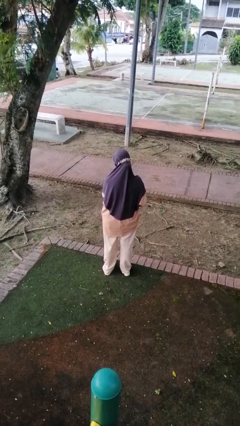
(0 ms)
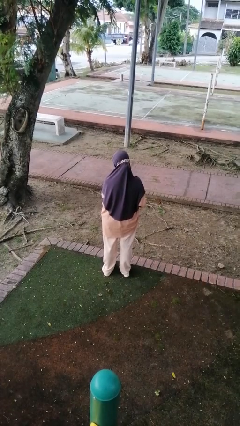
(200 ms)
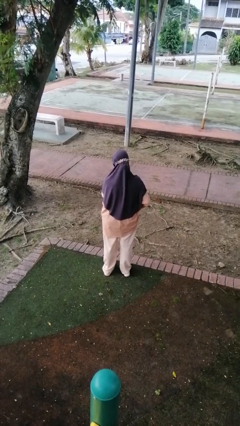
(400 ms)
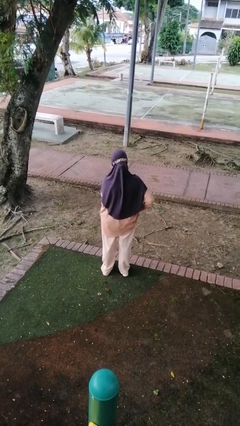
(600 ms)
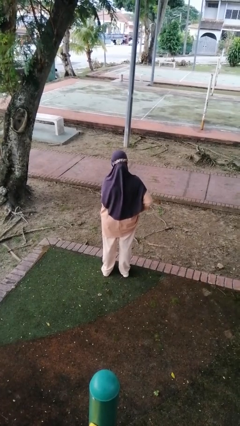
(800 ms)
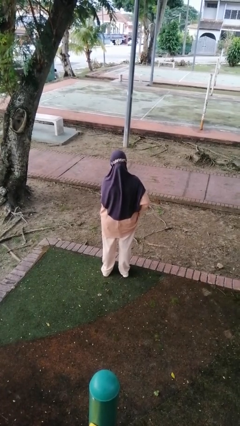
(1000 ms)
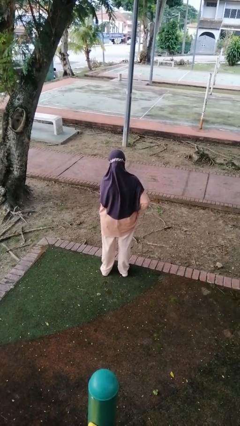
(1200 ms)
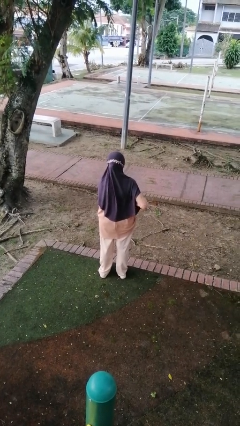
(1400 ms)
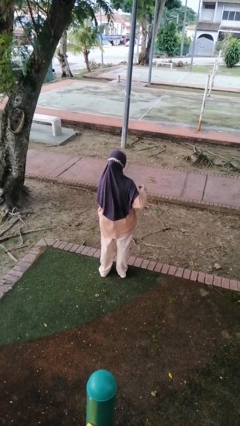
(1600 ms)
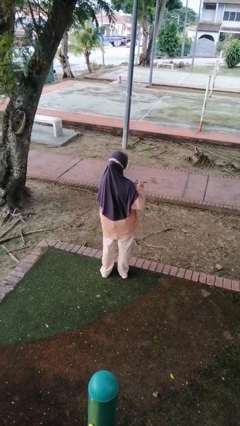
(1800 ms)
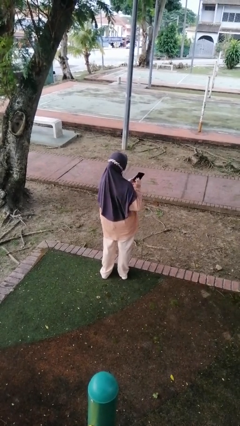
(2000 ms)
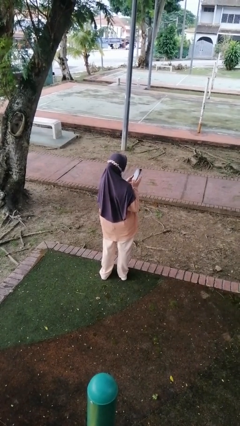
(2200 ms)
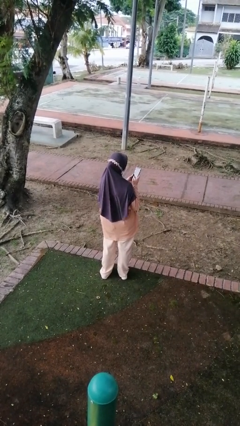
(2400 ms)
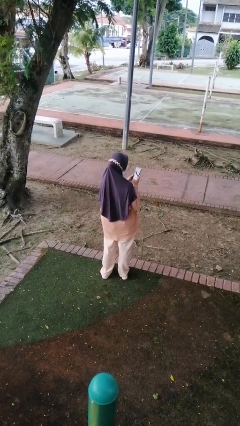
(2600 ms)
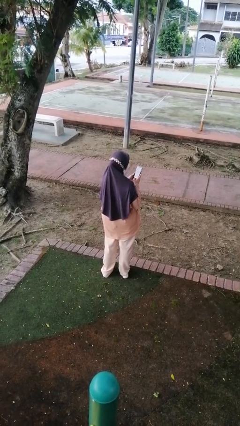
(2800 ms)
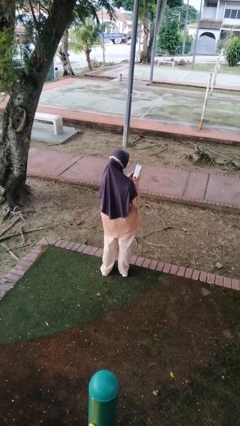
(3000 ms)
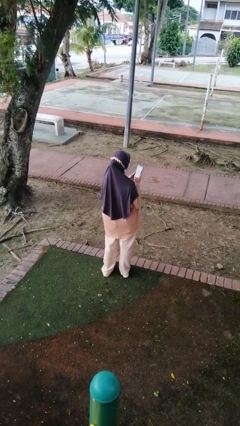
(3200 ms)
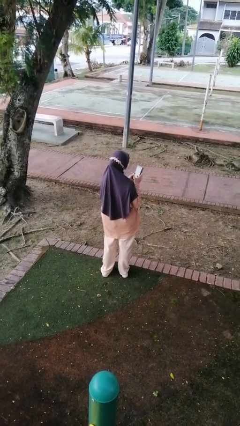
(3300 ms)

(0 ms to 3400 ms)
person takes phone from pocket

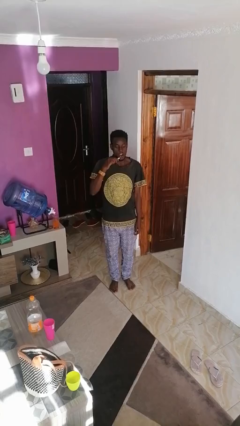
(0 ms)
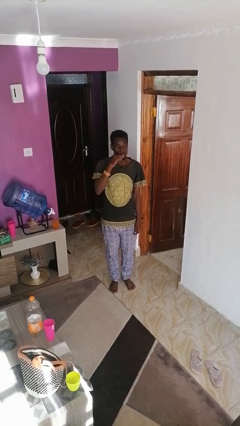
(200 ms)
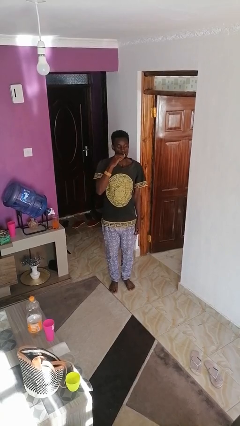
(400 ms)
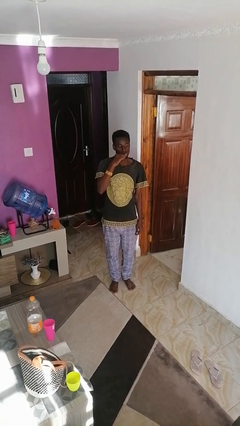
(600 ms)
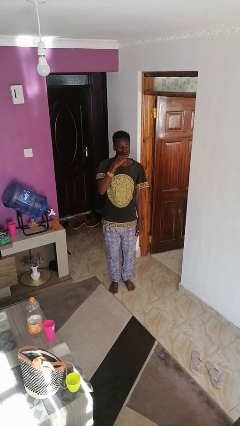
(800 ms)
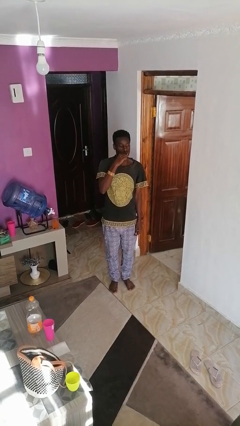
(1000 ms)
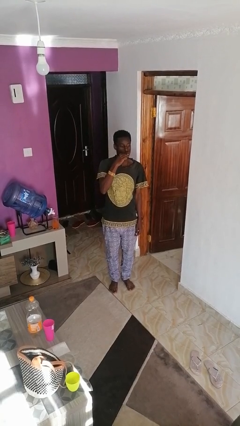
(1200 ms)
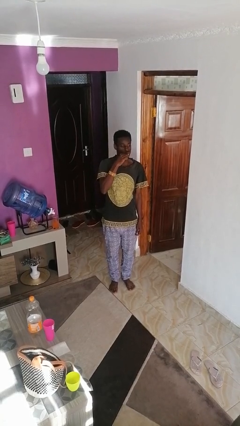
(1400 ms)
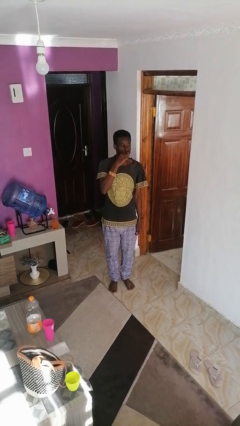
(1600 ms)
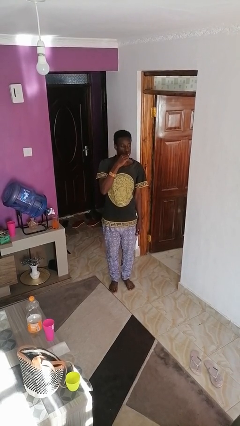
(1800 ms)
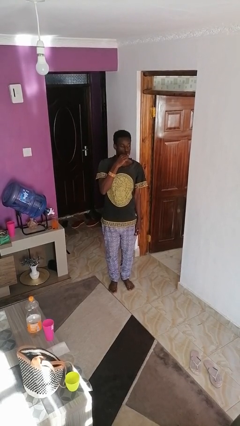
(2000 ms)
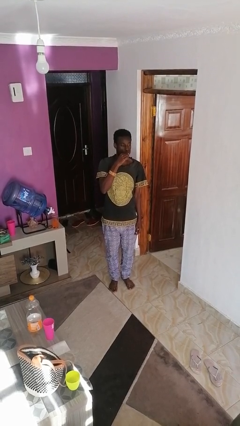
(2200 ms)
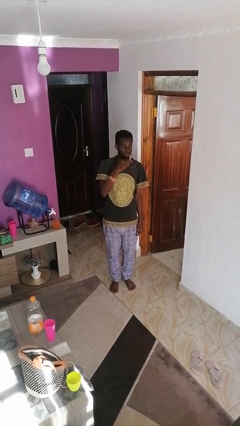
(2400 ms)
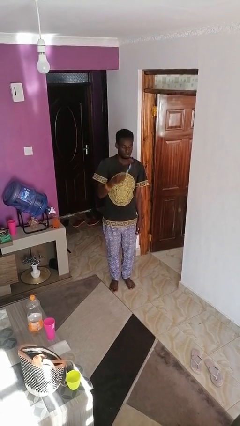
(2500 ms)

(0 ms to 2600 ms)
person brushes teeth

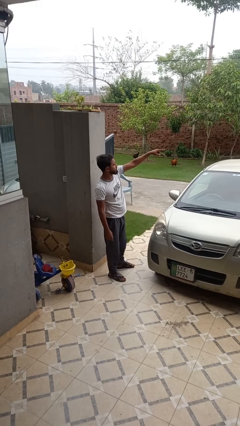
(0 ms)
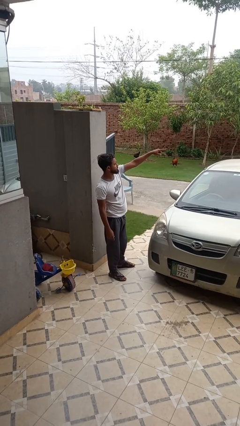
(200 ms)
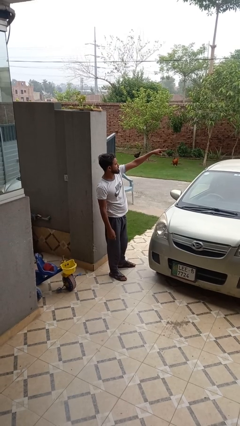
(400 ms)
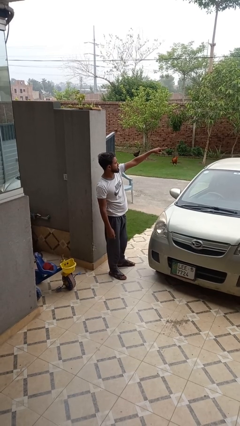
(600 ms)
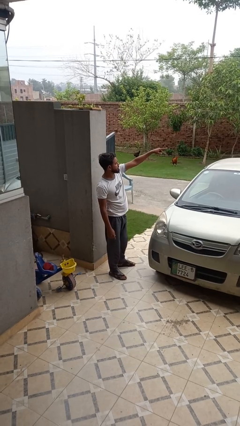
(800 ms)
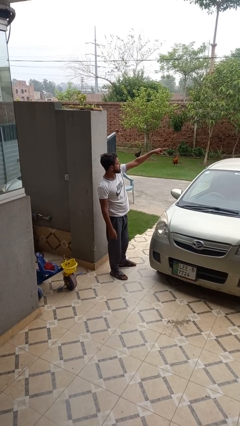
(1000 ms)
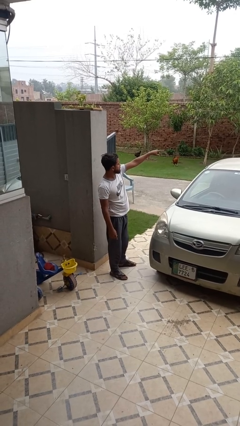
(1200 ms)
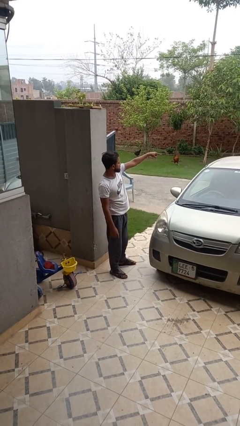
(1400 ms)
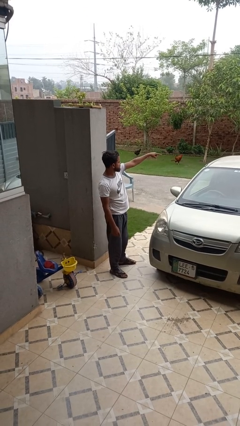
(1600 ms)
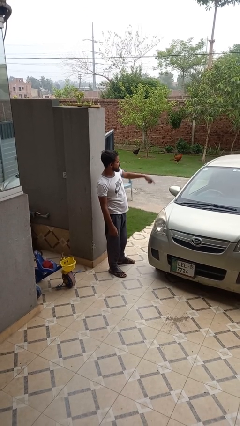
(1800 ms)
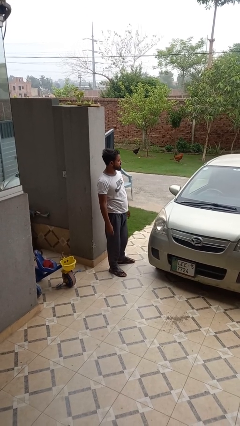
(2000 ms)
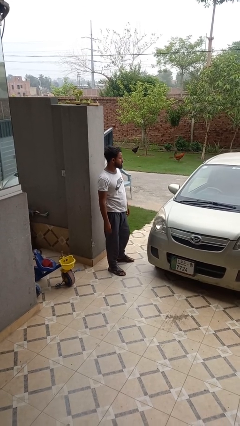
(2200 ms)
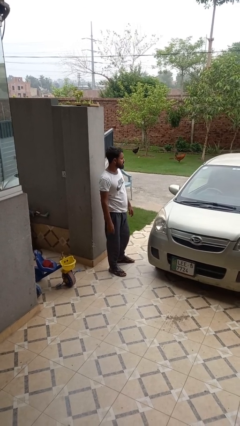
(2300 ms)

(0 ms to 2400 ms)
person points at person

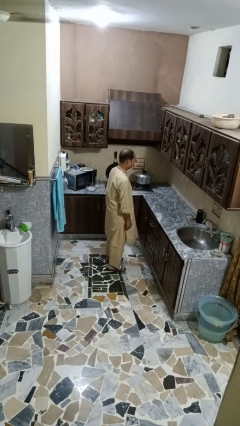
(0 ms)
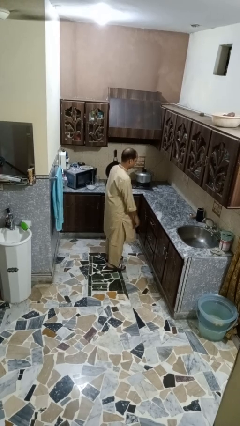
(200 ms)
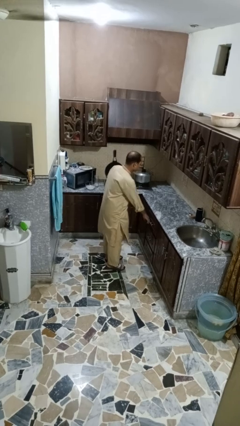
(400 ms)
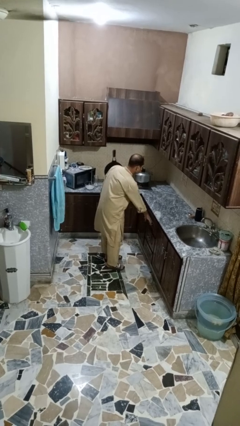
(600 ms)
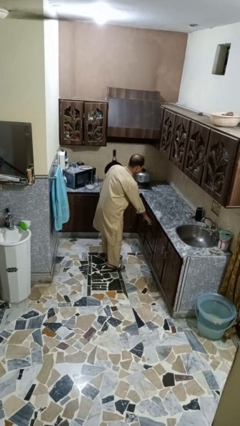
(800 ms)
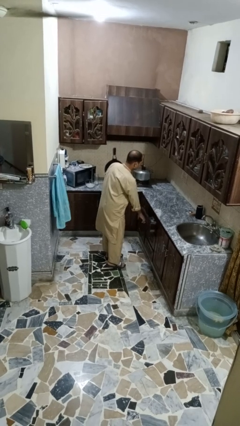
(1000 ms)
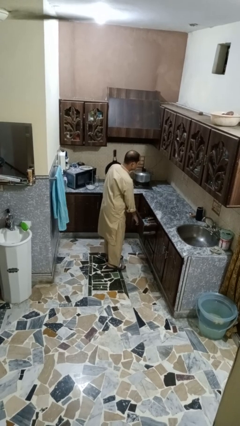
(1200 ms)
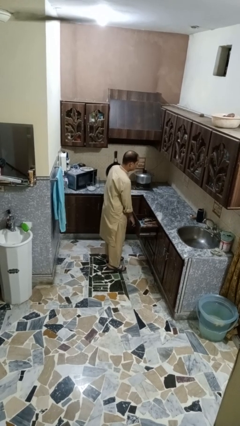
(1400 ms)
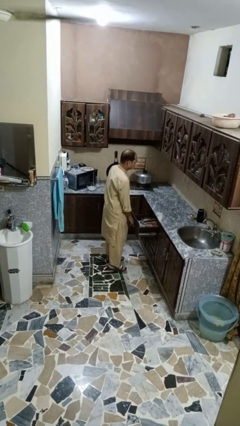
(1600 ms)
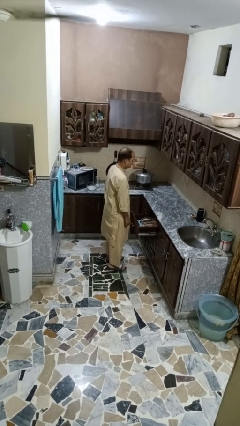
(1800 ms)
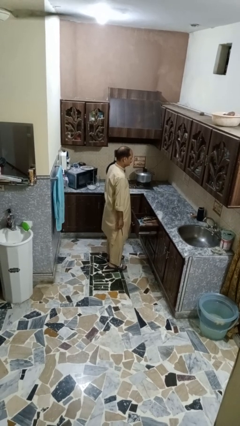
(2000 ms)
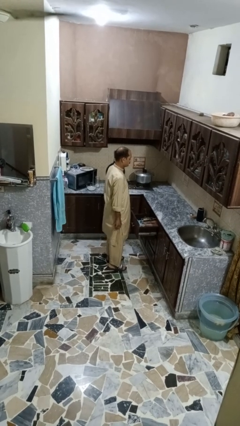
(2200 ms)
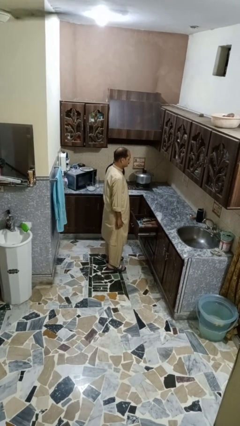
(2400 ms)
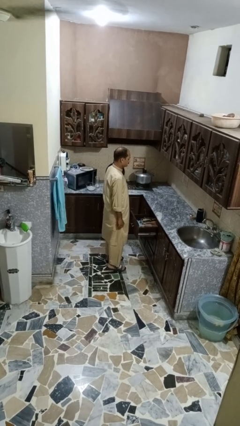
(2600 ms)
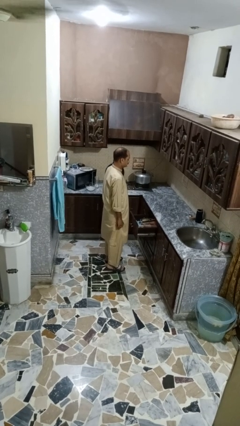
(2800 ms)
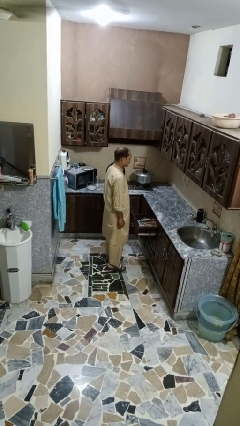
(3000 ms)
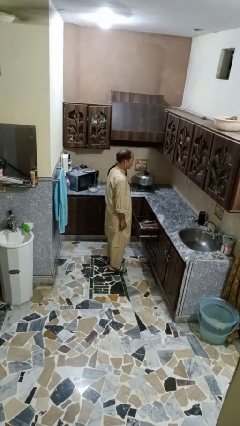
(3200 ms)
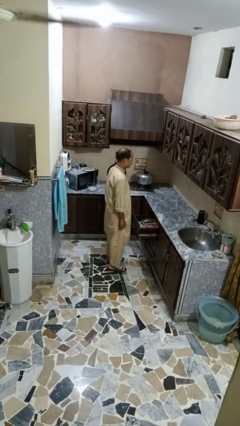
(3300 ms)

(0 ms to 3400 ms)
person opens kitchen drawer

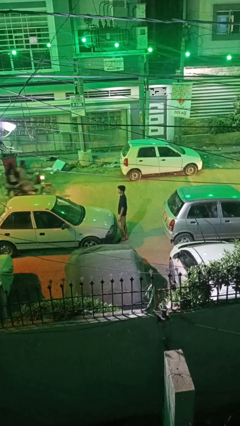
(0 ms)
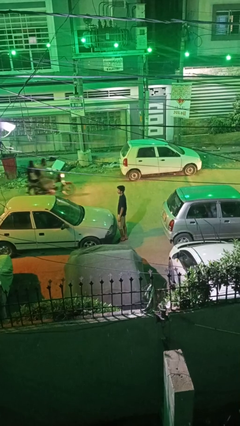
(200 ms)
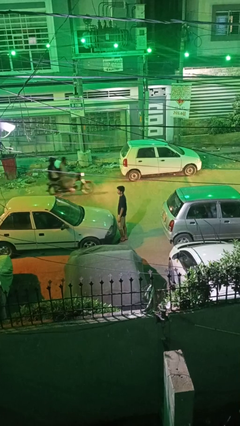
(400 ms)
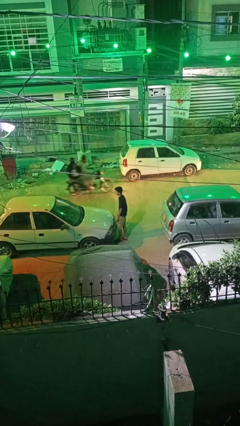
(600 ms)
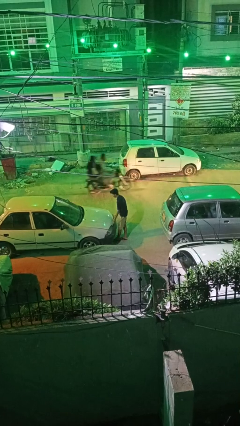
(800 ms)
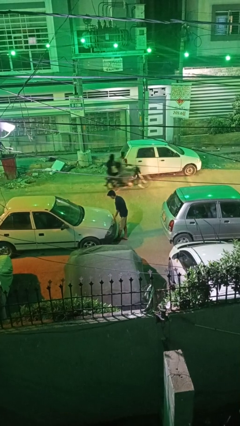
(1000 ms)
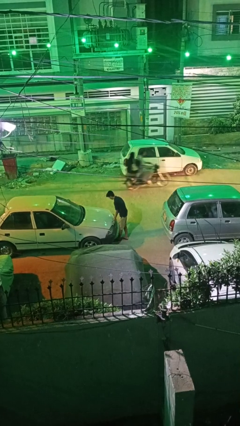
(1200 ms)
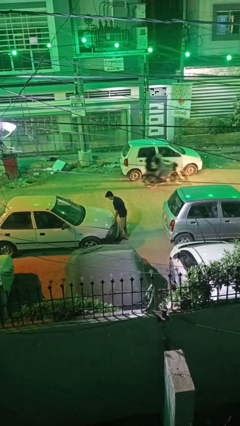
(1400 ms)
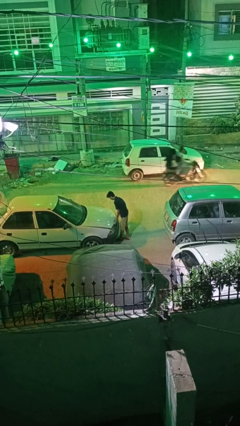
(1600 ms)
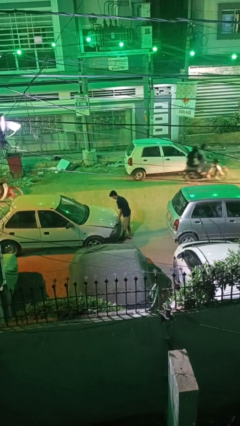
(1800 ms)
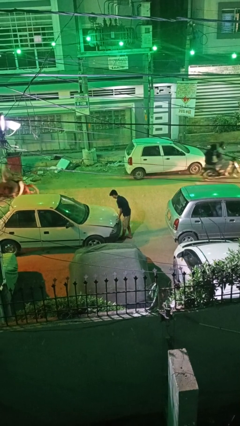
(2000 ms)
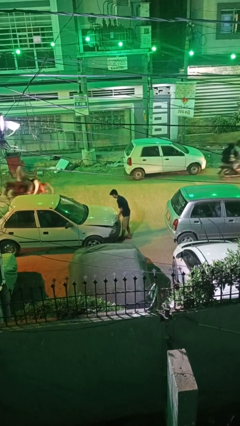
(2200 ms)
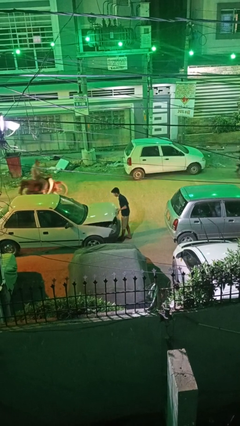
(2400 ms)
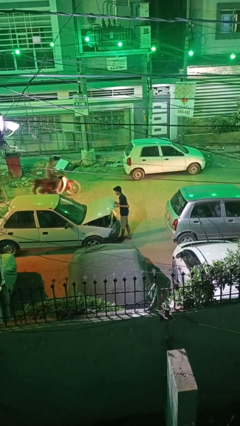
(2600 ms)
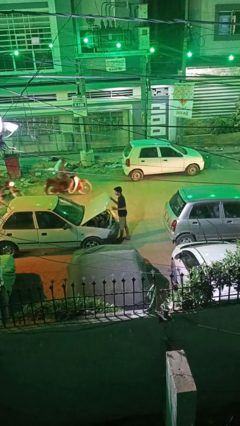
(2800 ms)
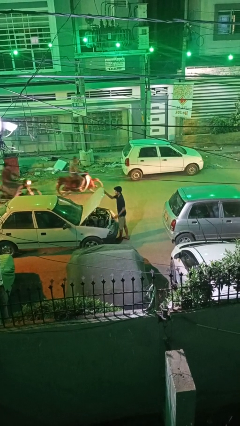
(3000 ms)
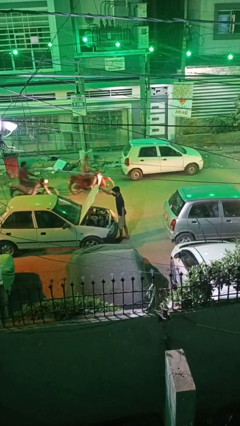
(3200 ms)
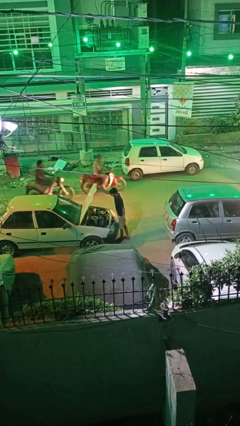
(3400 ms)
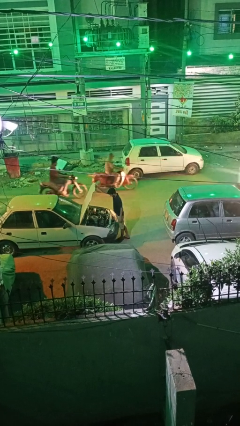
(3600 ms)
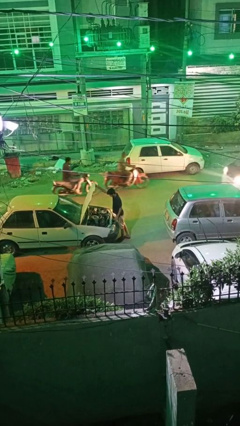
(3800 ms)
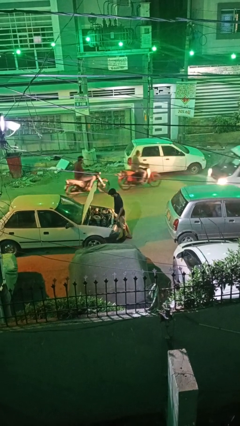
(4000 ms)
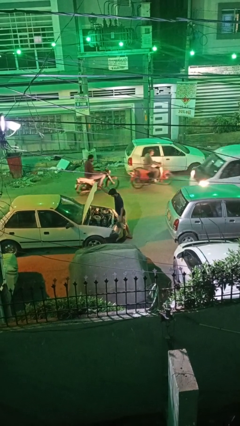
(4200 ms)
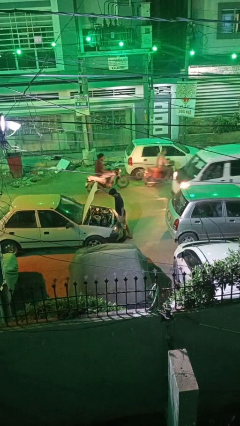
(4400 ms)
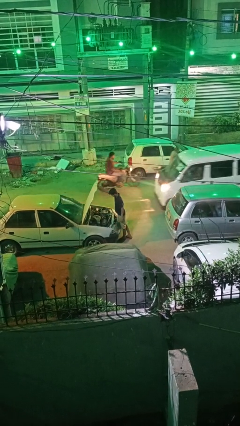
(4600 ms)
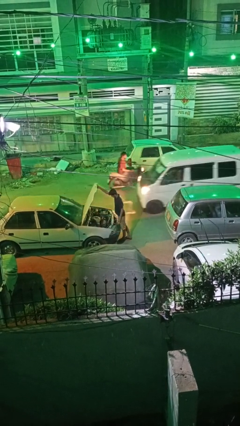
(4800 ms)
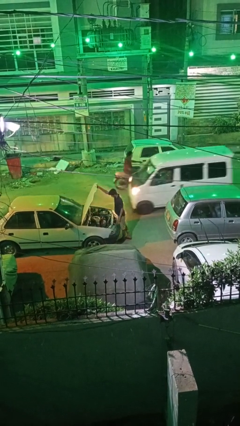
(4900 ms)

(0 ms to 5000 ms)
person opens car hood

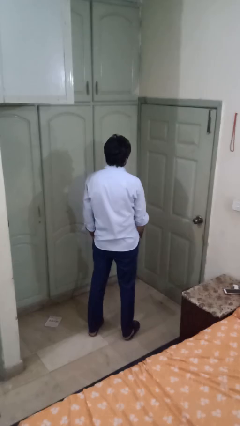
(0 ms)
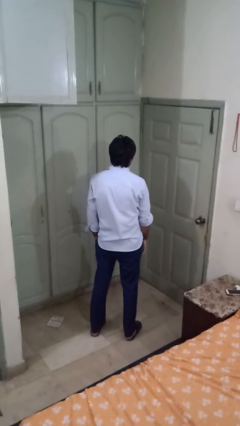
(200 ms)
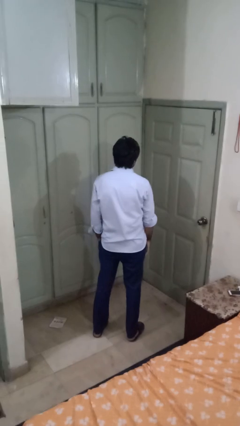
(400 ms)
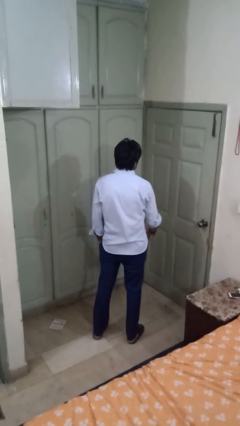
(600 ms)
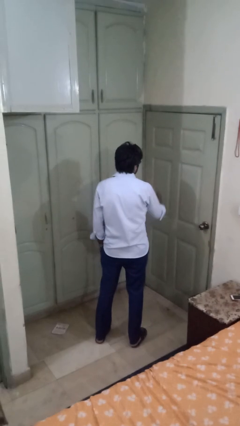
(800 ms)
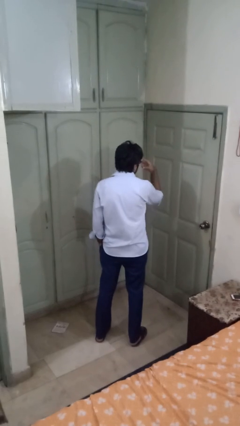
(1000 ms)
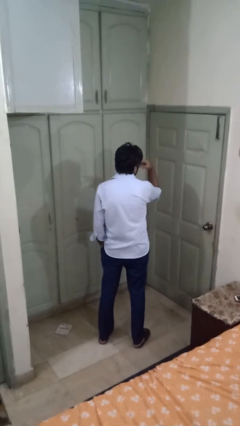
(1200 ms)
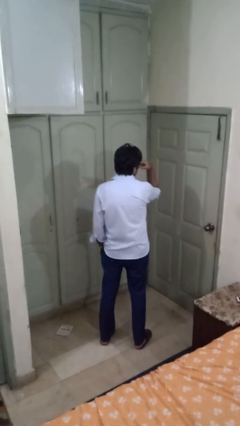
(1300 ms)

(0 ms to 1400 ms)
person gestures watch closely
